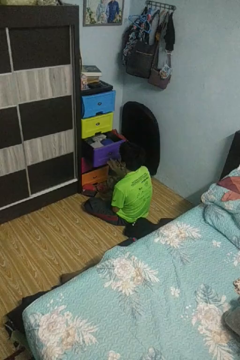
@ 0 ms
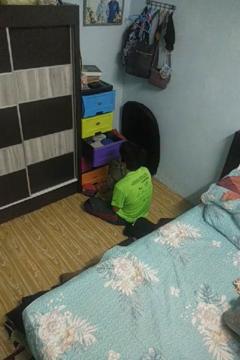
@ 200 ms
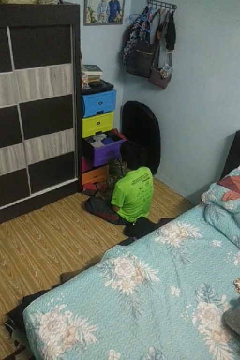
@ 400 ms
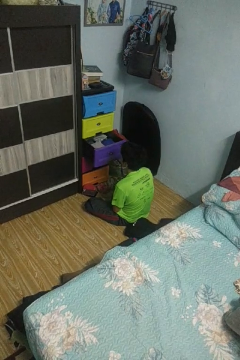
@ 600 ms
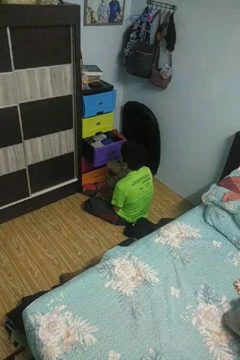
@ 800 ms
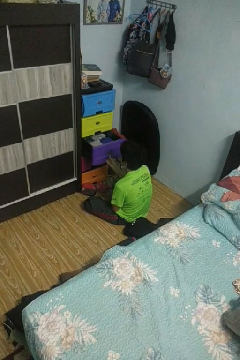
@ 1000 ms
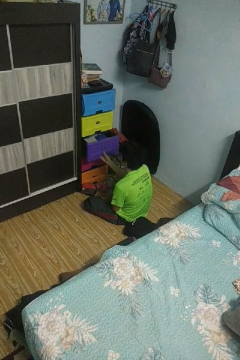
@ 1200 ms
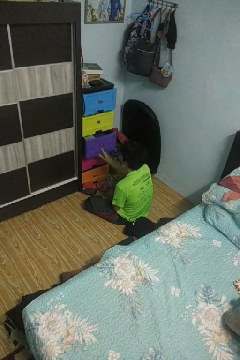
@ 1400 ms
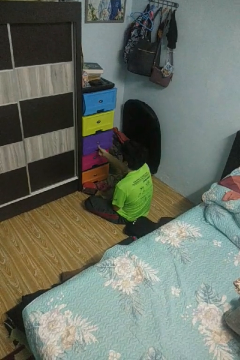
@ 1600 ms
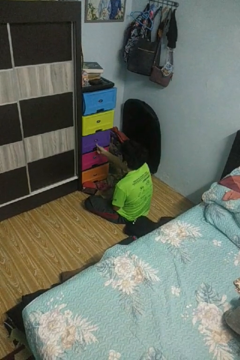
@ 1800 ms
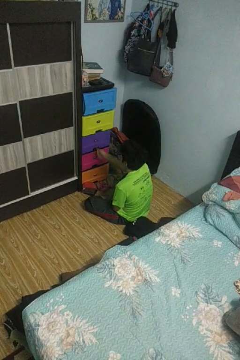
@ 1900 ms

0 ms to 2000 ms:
person closes dresser drawer

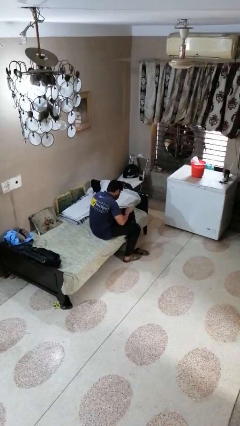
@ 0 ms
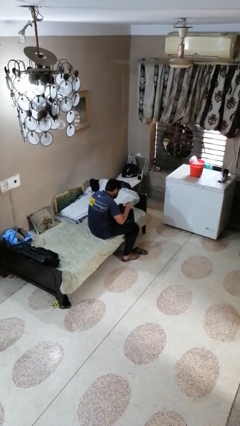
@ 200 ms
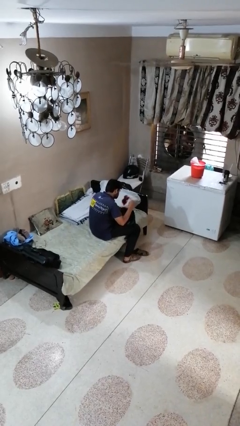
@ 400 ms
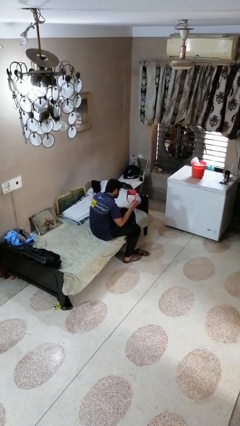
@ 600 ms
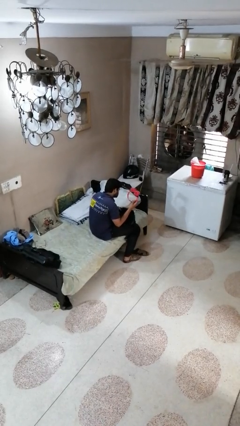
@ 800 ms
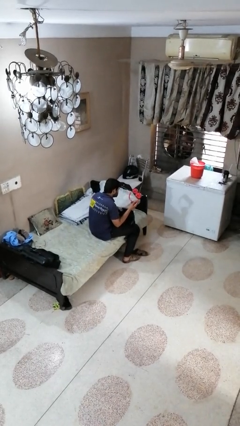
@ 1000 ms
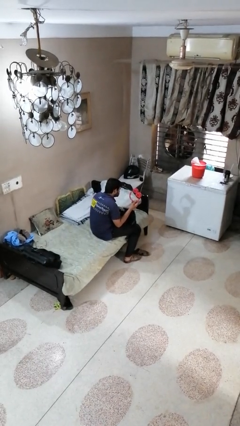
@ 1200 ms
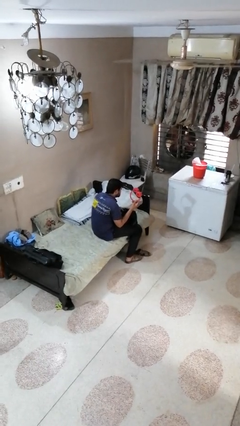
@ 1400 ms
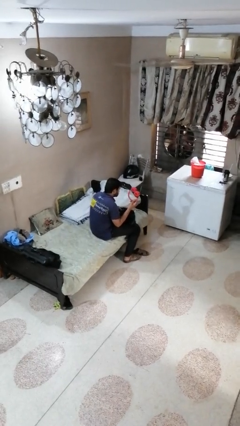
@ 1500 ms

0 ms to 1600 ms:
person takes object from purse

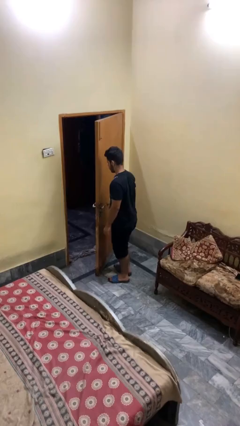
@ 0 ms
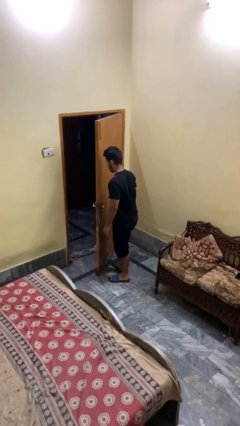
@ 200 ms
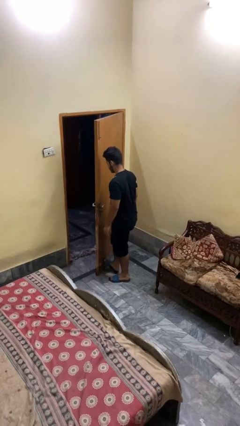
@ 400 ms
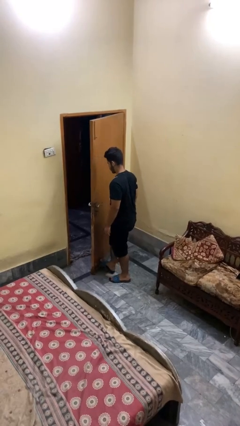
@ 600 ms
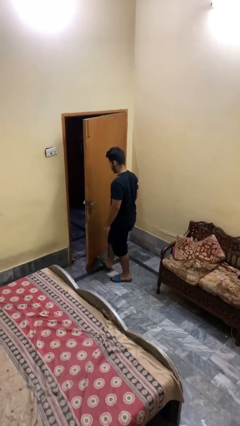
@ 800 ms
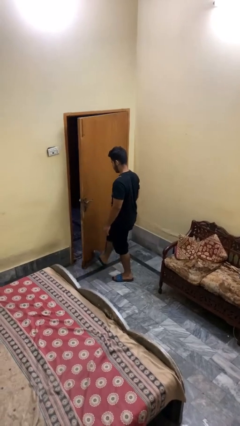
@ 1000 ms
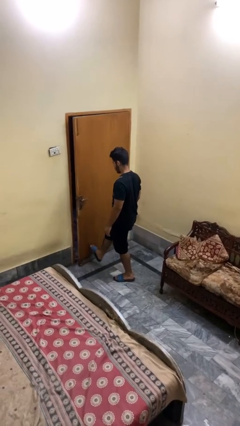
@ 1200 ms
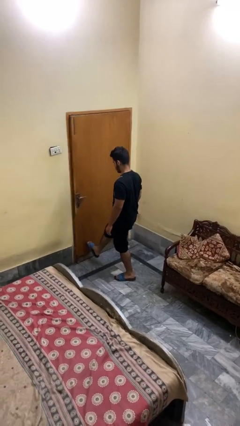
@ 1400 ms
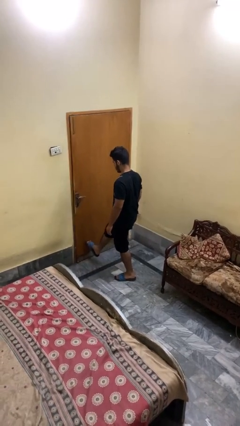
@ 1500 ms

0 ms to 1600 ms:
person closes door with foot

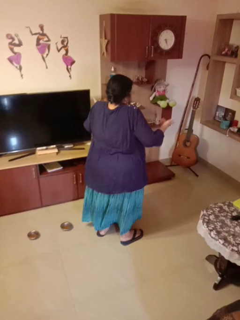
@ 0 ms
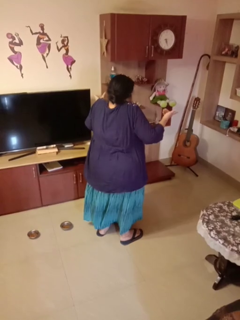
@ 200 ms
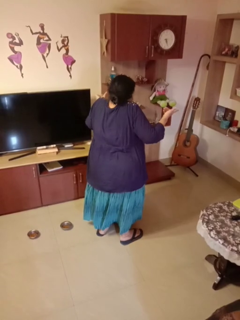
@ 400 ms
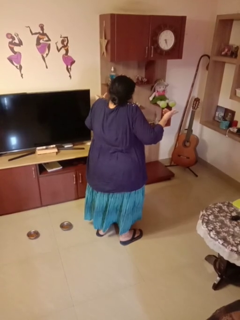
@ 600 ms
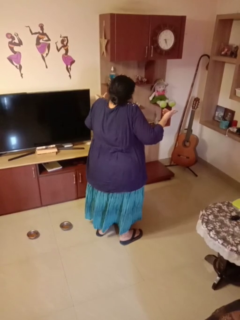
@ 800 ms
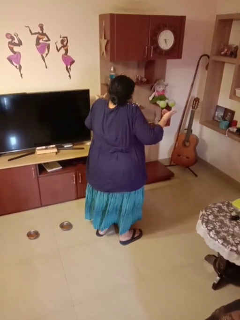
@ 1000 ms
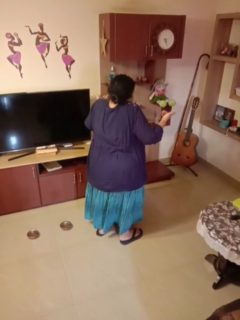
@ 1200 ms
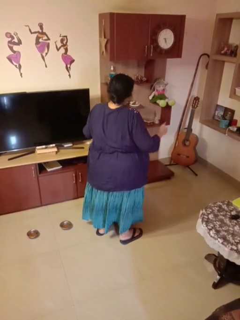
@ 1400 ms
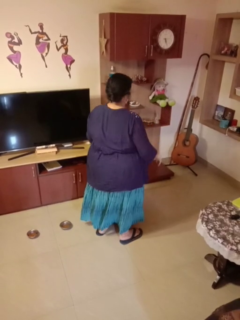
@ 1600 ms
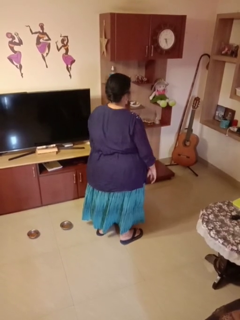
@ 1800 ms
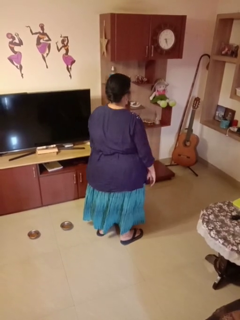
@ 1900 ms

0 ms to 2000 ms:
person shrugs

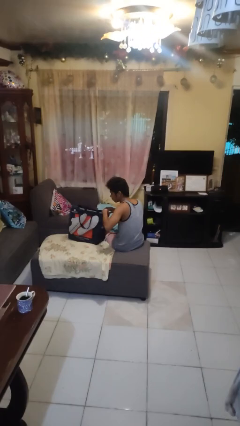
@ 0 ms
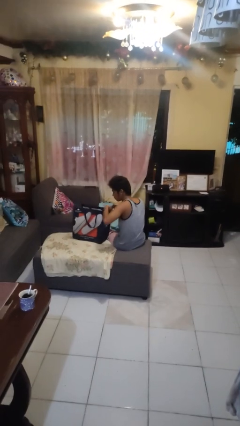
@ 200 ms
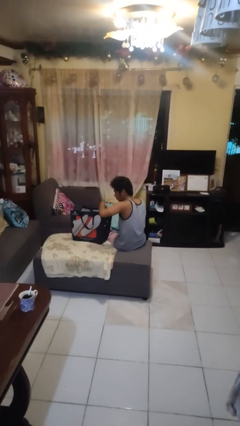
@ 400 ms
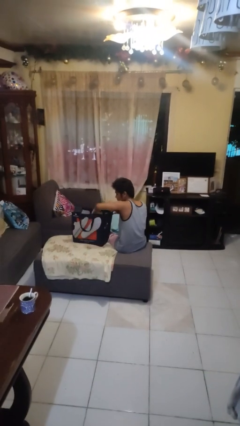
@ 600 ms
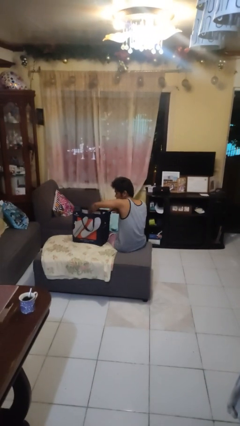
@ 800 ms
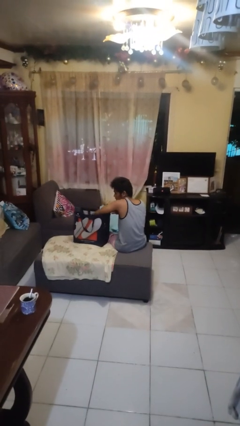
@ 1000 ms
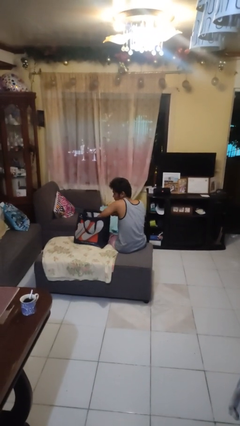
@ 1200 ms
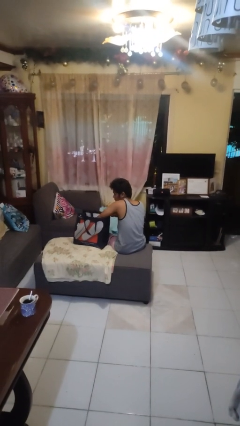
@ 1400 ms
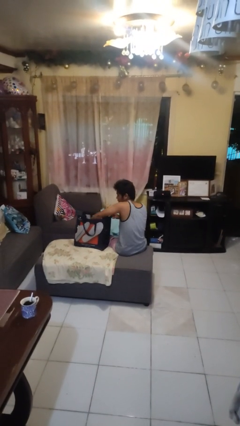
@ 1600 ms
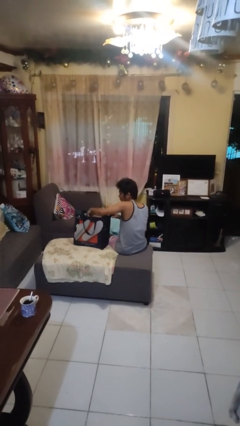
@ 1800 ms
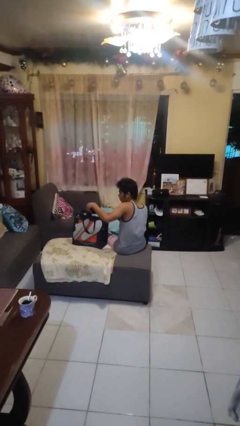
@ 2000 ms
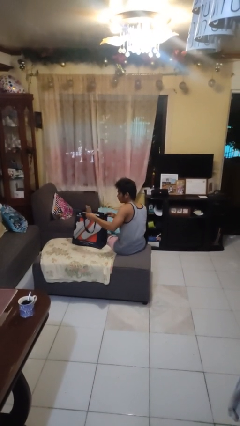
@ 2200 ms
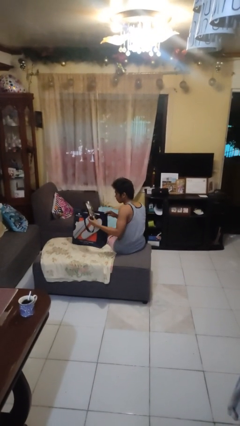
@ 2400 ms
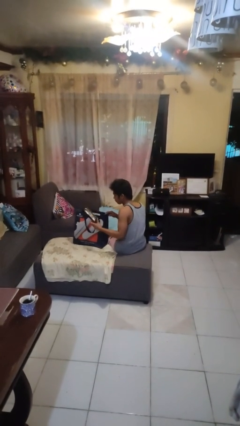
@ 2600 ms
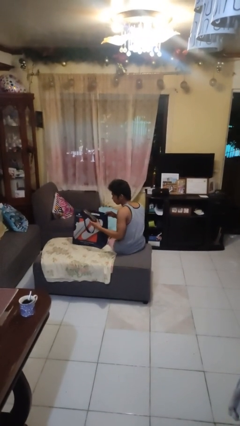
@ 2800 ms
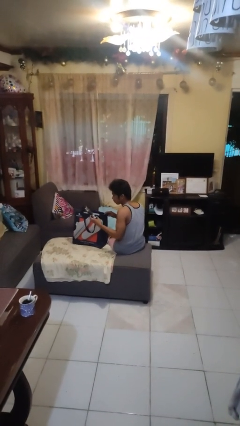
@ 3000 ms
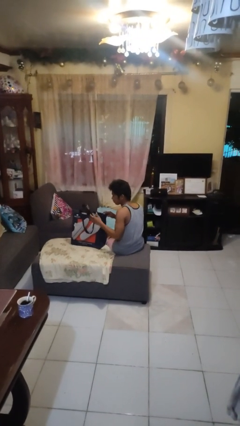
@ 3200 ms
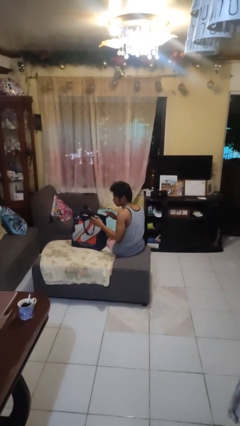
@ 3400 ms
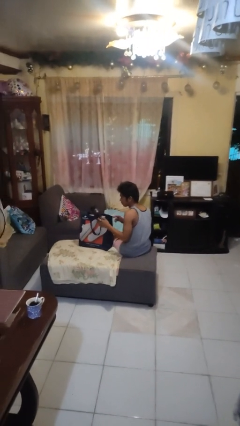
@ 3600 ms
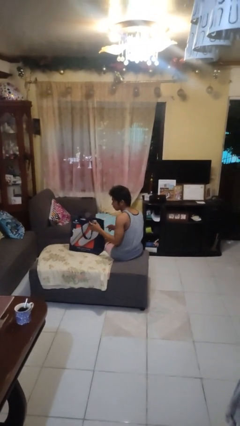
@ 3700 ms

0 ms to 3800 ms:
person takes object from bag

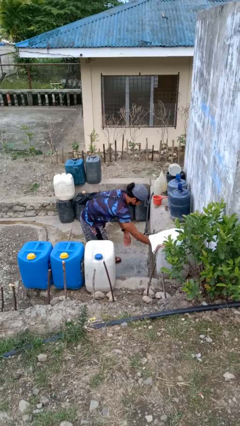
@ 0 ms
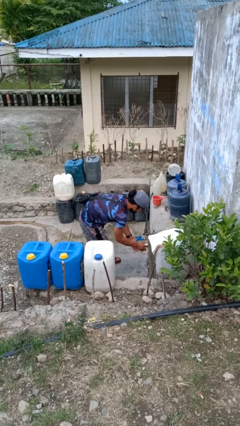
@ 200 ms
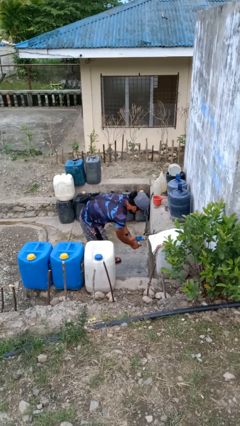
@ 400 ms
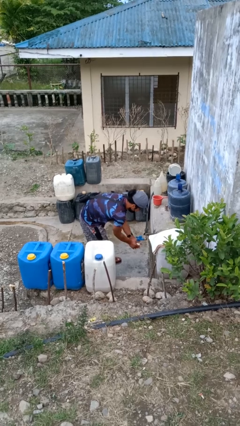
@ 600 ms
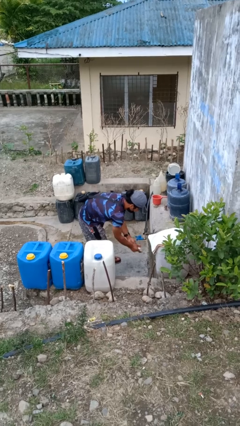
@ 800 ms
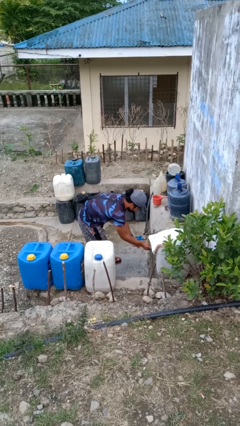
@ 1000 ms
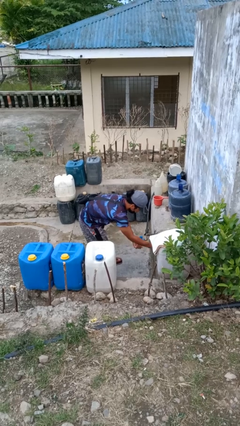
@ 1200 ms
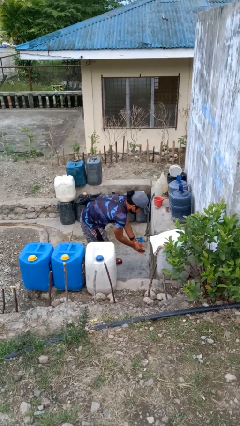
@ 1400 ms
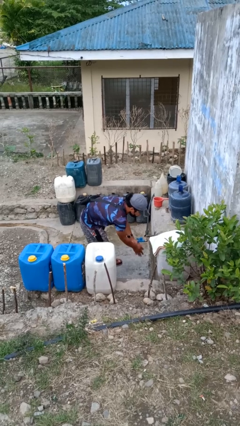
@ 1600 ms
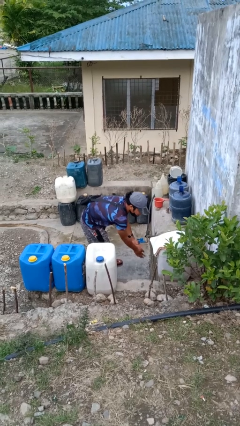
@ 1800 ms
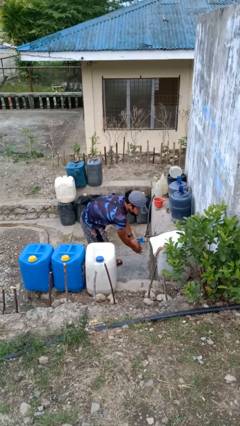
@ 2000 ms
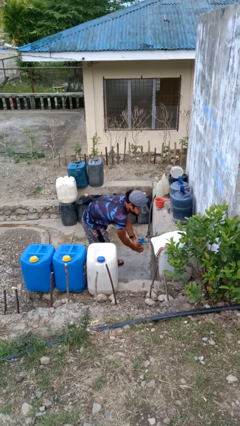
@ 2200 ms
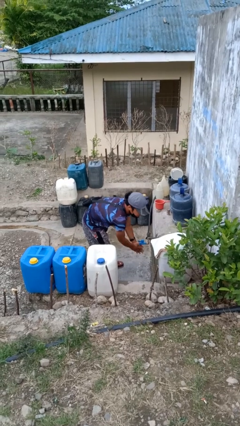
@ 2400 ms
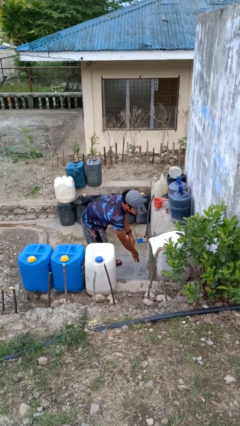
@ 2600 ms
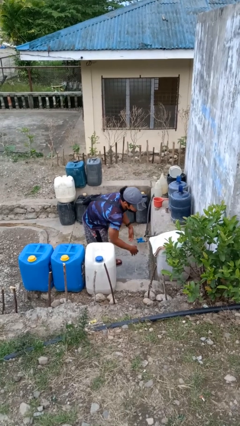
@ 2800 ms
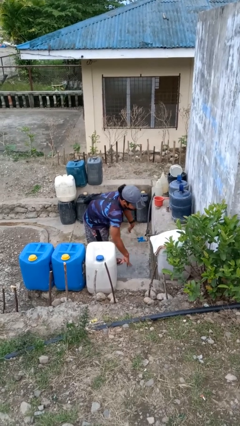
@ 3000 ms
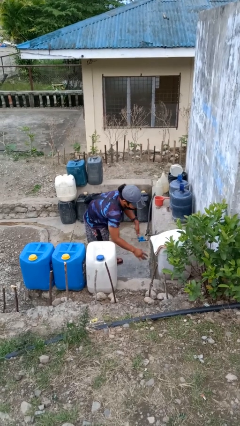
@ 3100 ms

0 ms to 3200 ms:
person washes hands

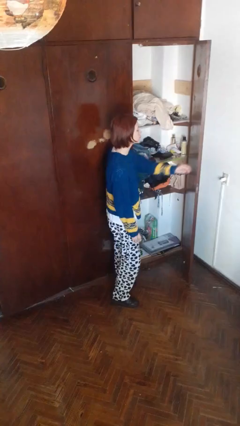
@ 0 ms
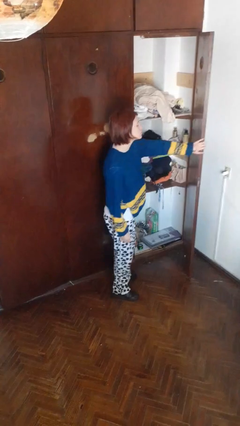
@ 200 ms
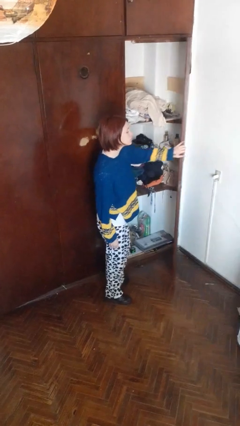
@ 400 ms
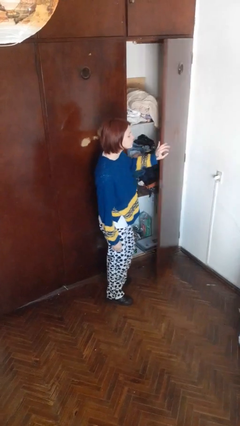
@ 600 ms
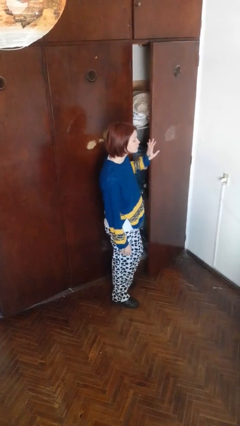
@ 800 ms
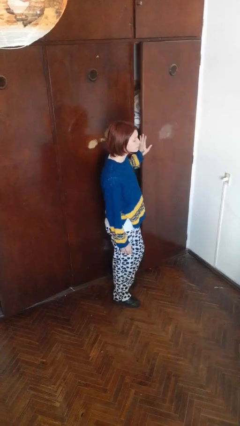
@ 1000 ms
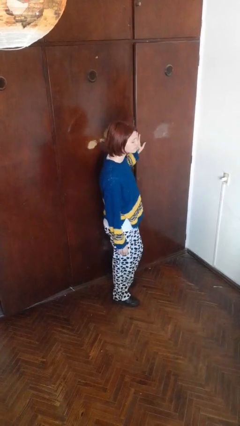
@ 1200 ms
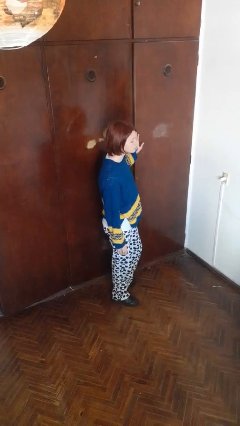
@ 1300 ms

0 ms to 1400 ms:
person closes closet door

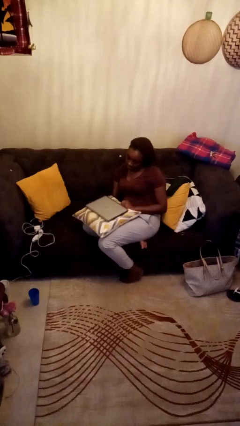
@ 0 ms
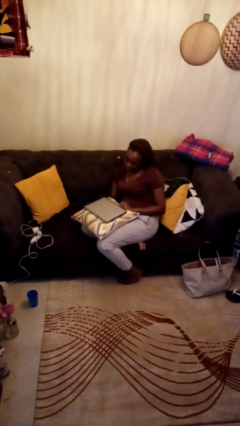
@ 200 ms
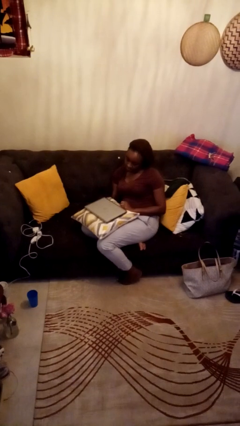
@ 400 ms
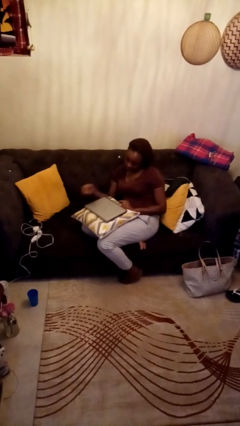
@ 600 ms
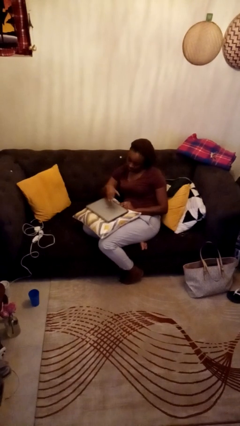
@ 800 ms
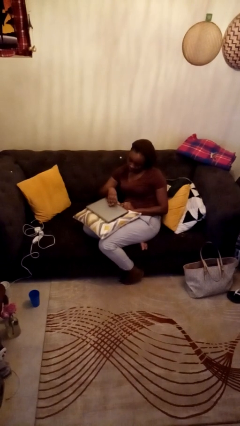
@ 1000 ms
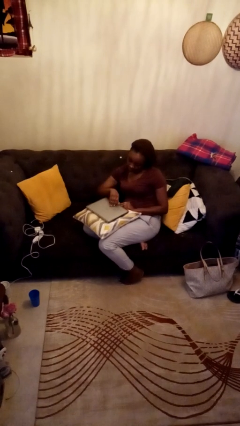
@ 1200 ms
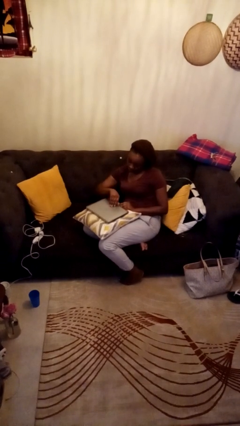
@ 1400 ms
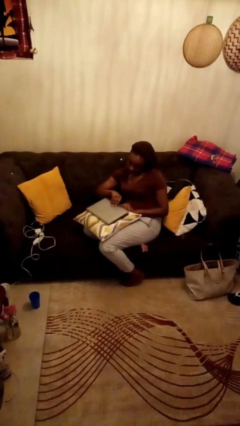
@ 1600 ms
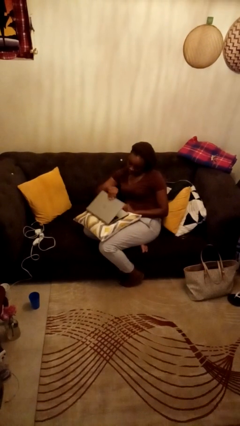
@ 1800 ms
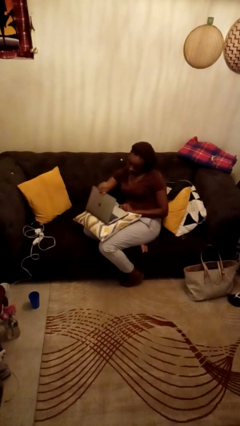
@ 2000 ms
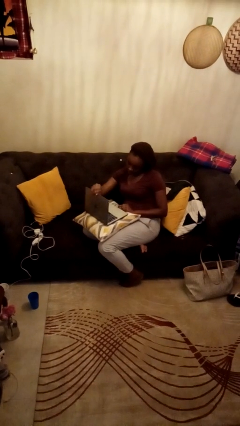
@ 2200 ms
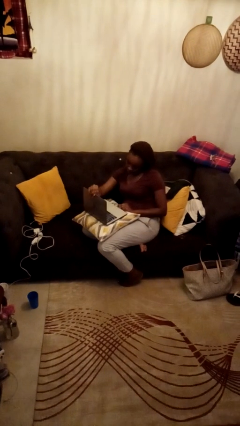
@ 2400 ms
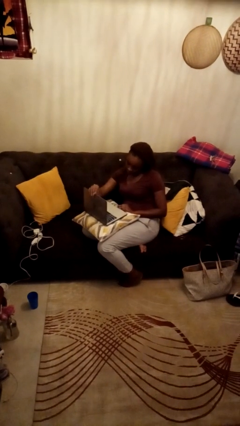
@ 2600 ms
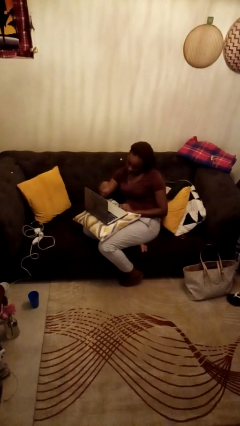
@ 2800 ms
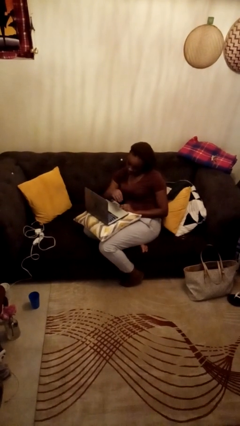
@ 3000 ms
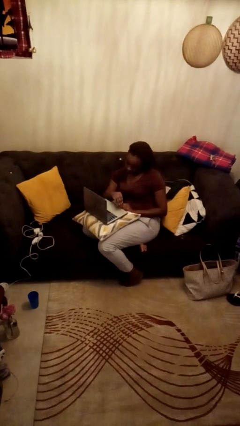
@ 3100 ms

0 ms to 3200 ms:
person opens laptop
